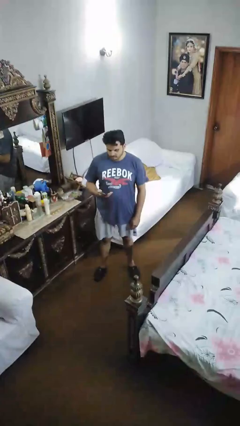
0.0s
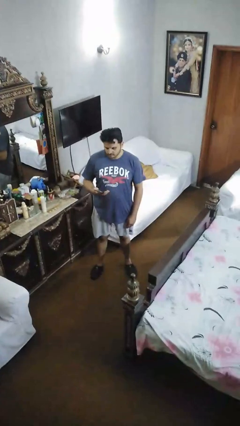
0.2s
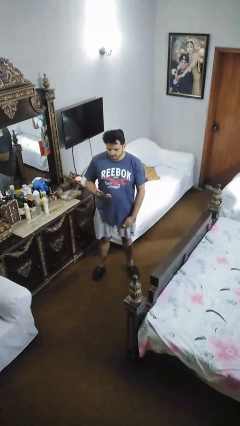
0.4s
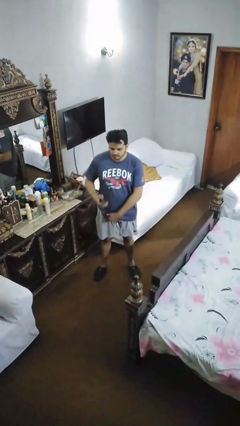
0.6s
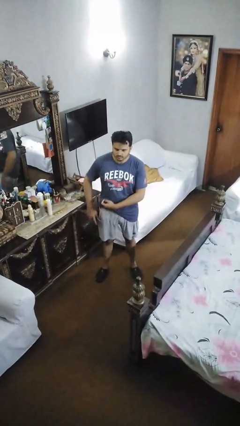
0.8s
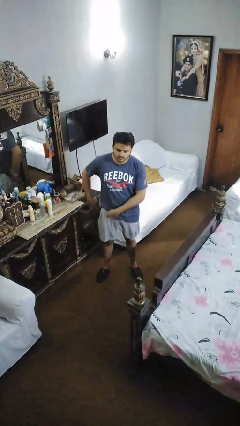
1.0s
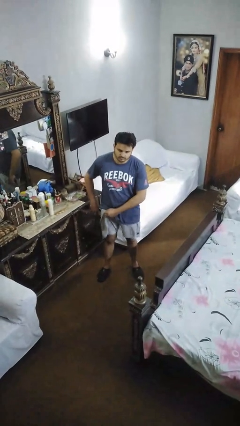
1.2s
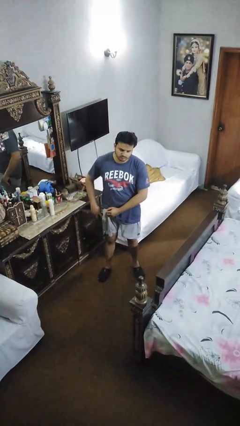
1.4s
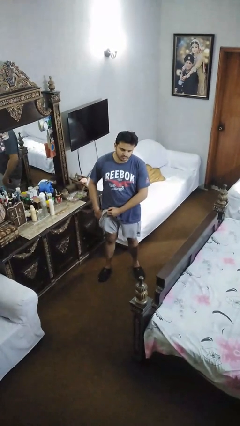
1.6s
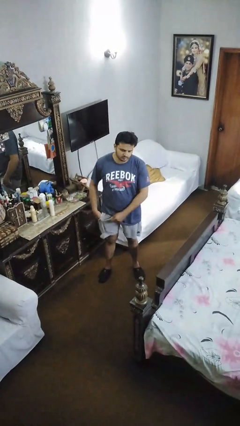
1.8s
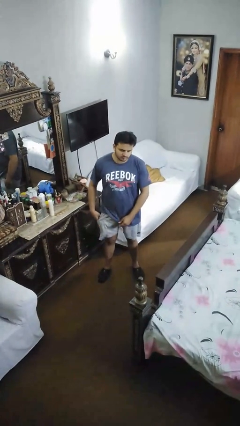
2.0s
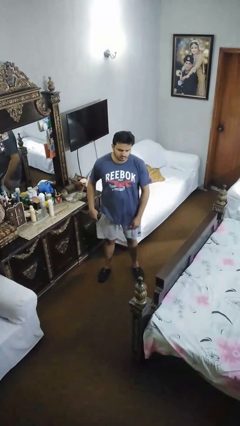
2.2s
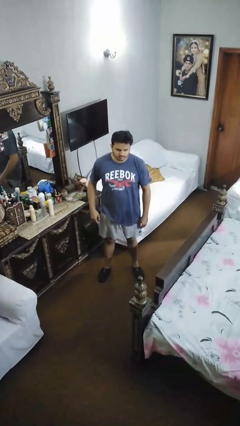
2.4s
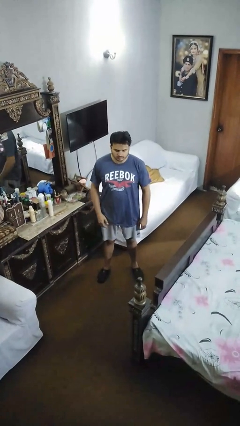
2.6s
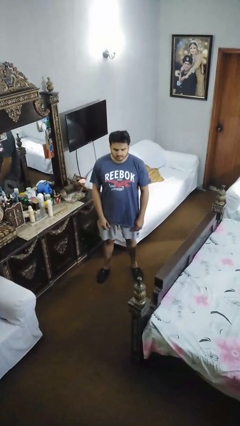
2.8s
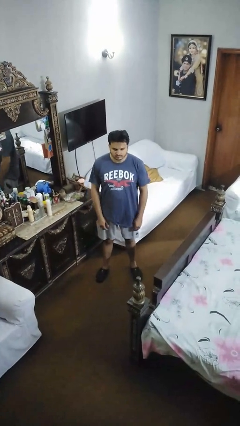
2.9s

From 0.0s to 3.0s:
person puts phone into pocket

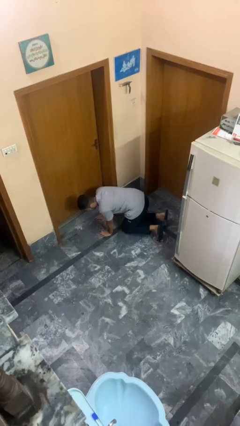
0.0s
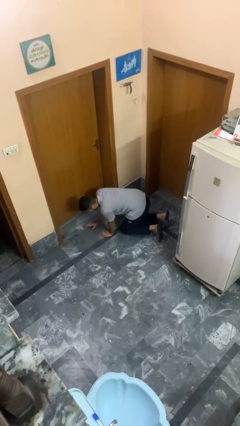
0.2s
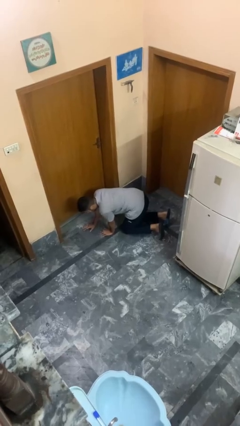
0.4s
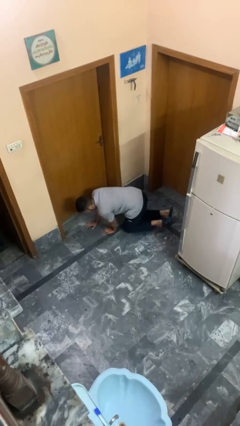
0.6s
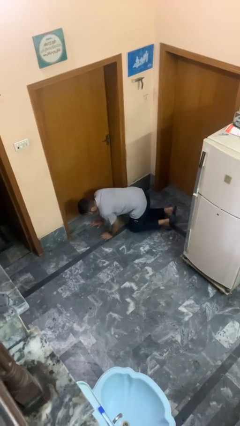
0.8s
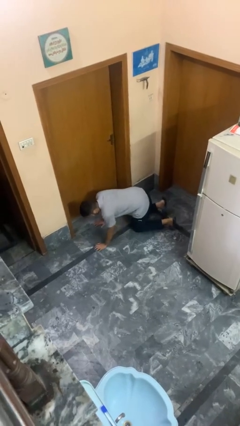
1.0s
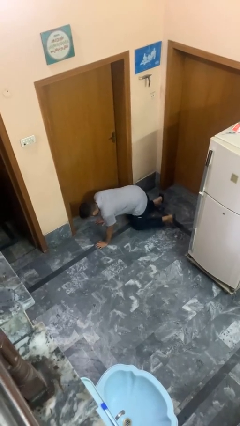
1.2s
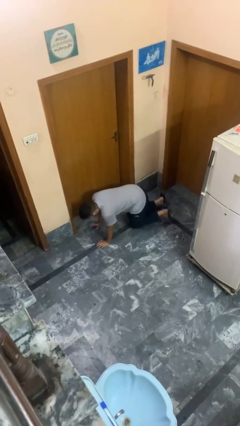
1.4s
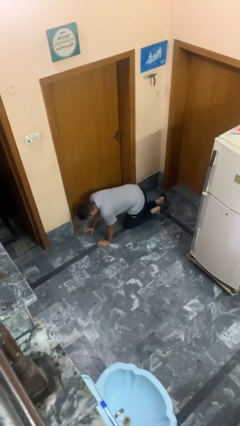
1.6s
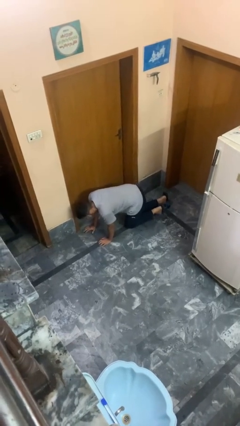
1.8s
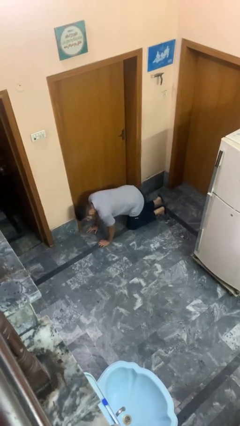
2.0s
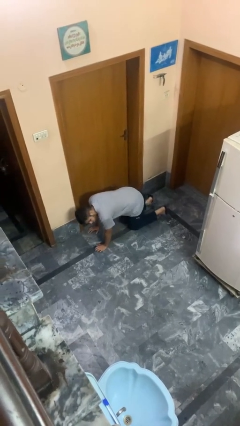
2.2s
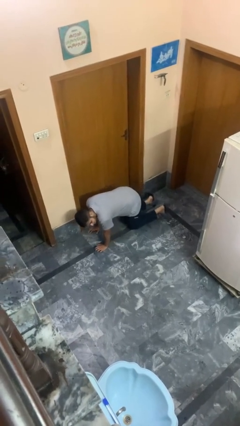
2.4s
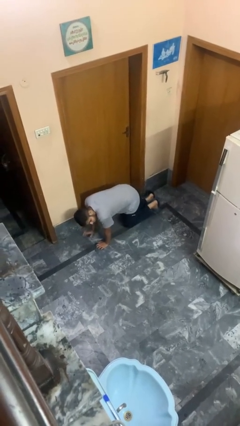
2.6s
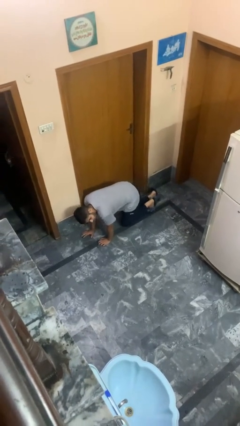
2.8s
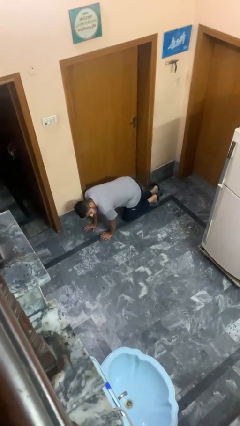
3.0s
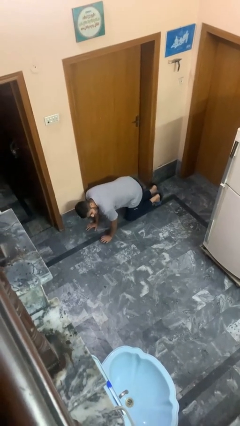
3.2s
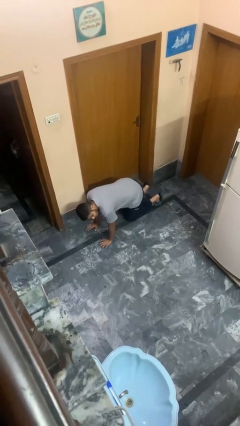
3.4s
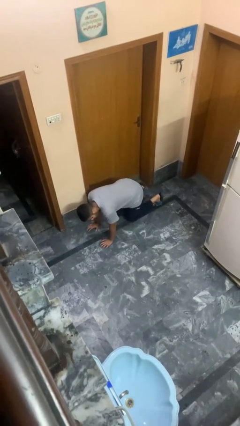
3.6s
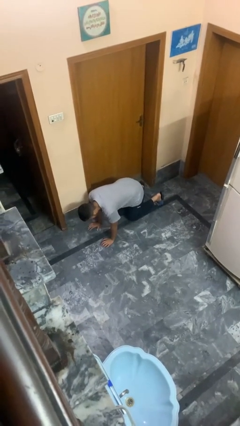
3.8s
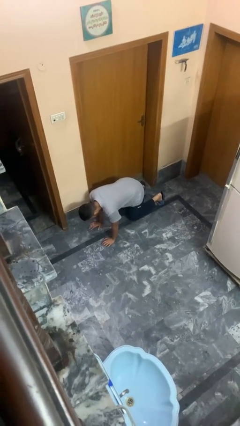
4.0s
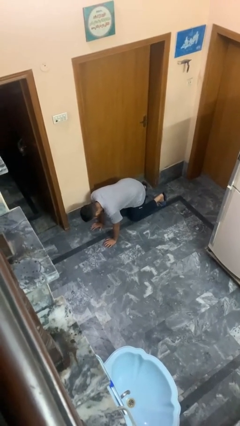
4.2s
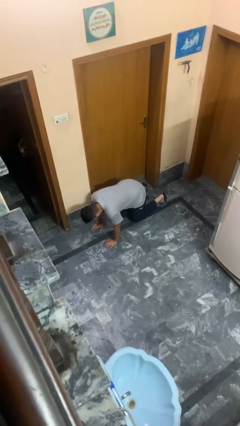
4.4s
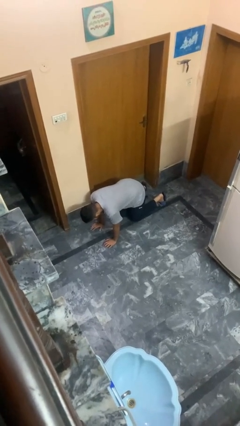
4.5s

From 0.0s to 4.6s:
person crawls

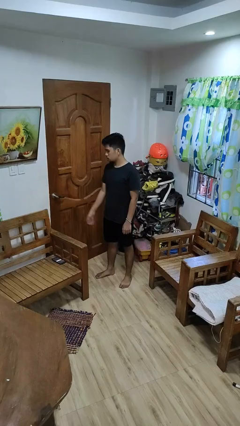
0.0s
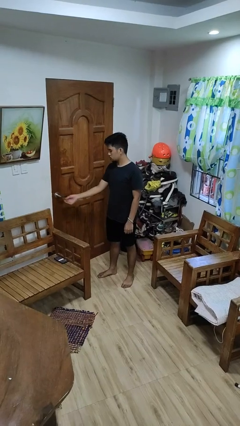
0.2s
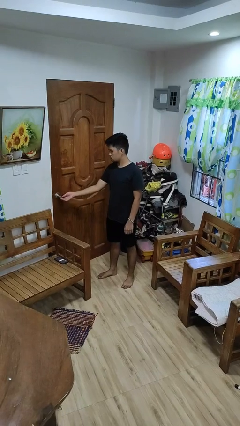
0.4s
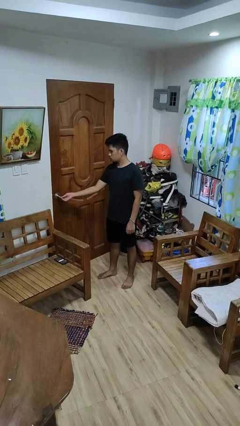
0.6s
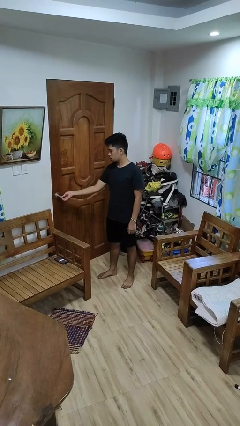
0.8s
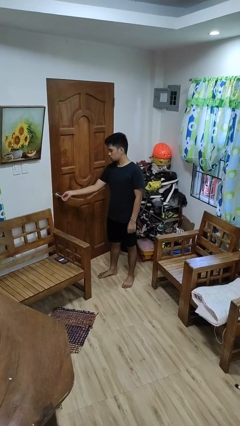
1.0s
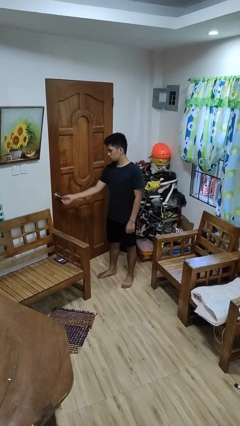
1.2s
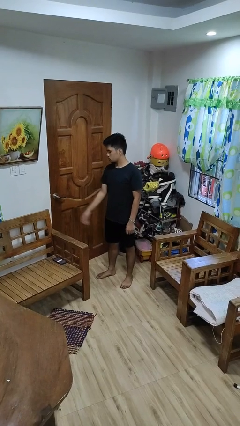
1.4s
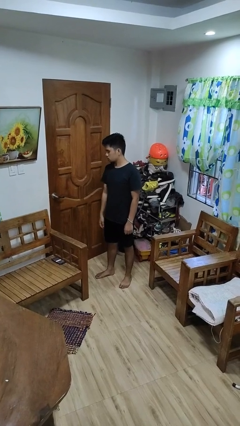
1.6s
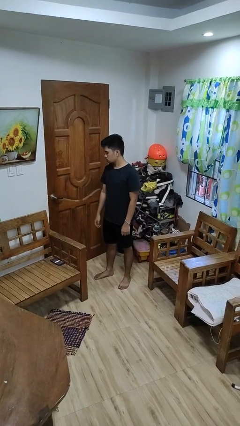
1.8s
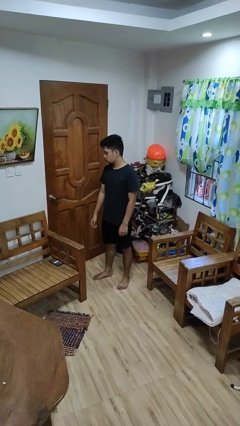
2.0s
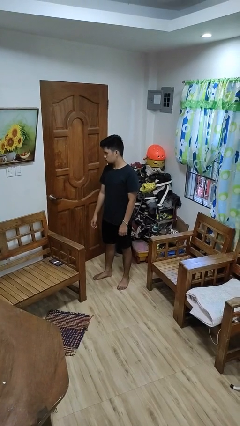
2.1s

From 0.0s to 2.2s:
person locks door with keys

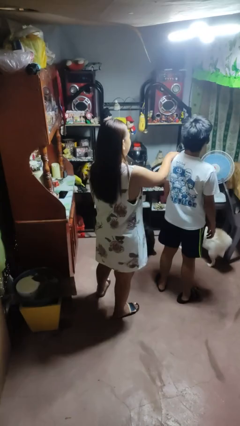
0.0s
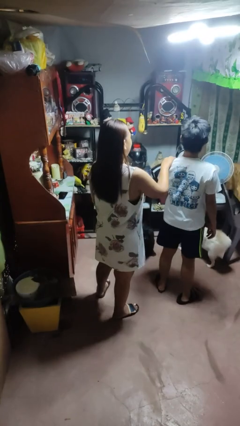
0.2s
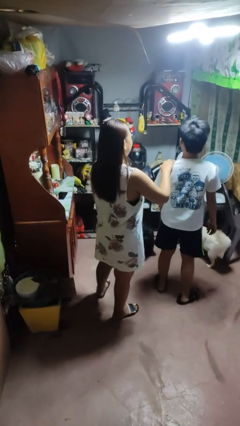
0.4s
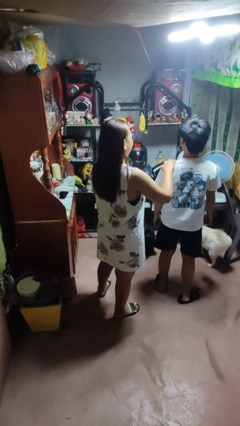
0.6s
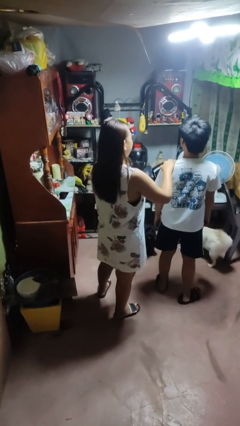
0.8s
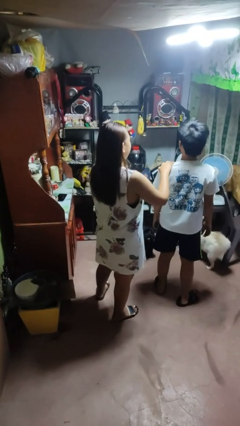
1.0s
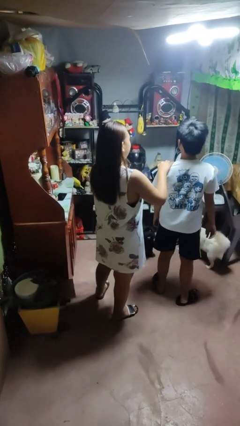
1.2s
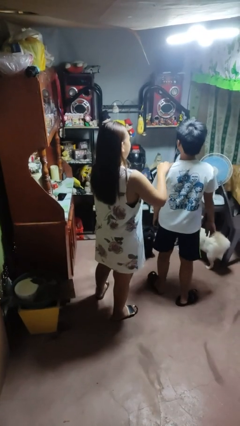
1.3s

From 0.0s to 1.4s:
person grabs person by shoulder

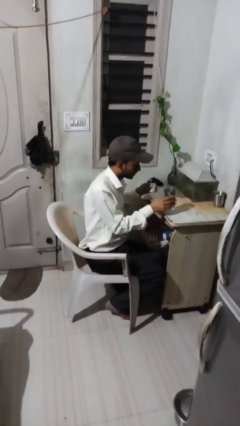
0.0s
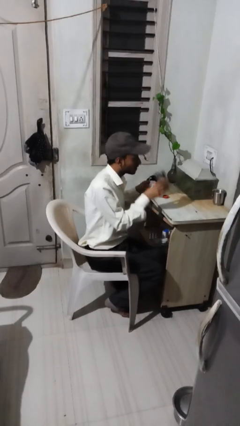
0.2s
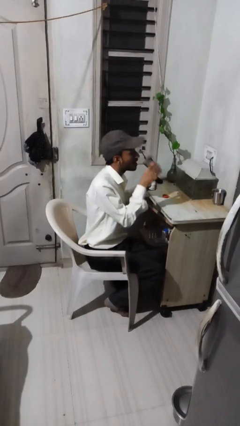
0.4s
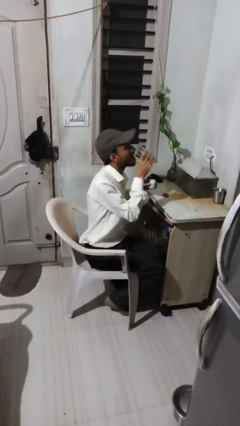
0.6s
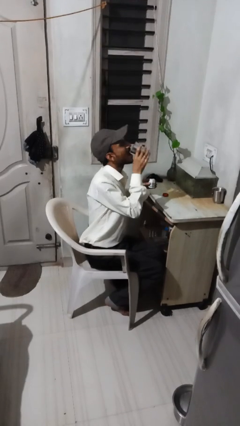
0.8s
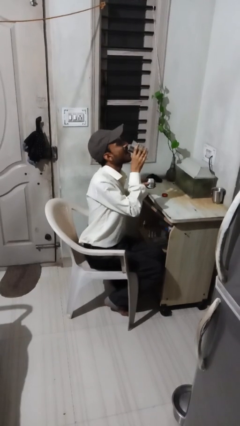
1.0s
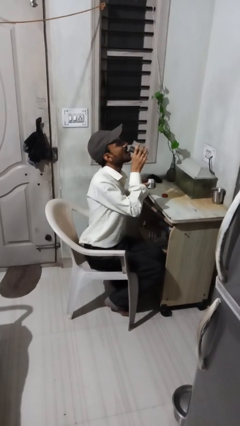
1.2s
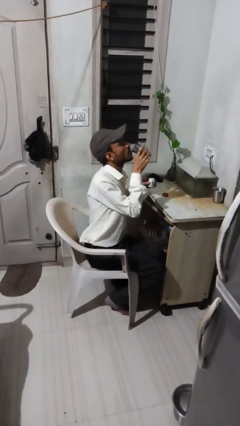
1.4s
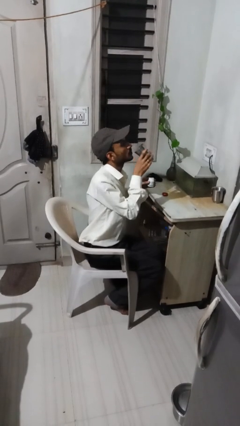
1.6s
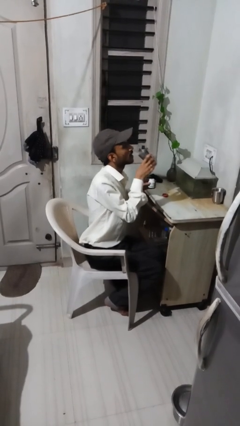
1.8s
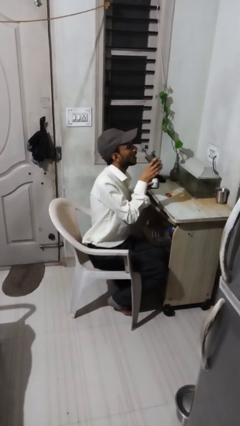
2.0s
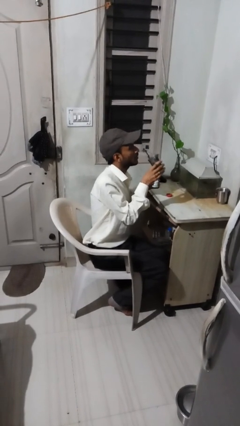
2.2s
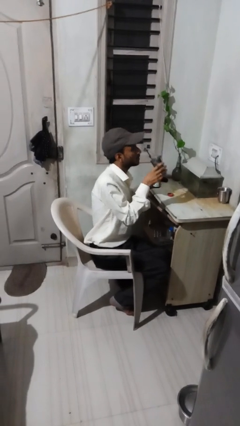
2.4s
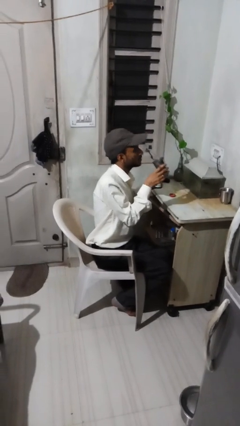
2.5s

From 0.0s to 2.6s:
person drinks from cup

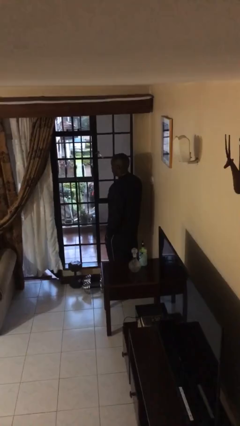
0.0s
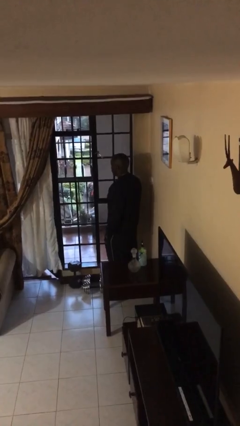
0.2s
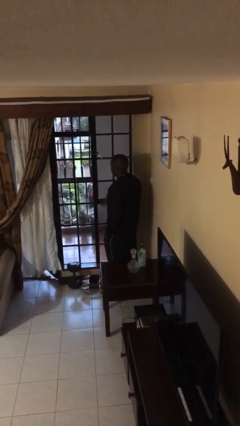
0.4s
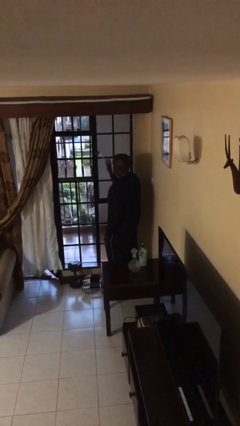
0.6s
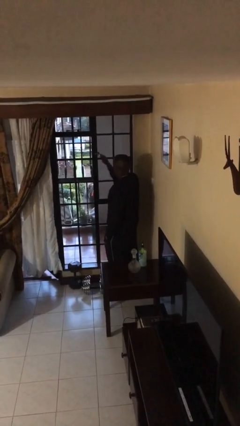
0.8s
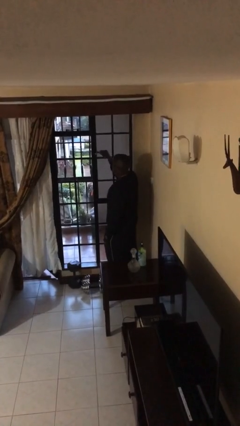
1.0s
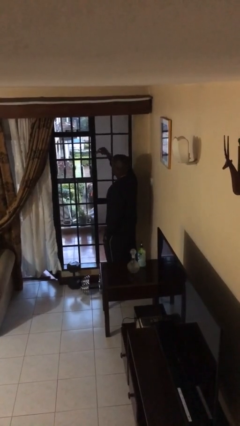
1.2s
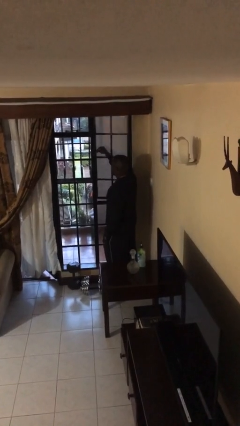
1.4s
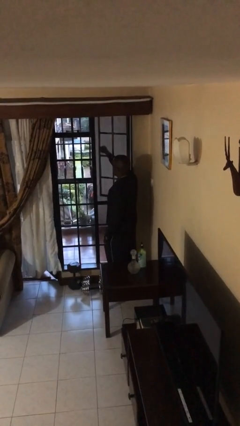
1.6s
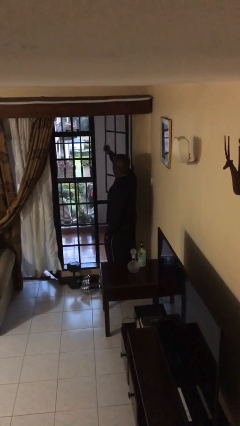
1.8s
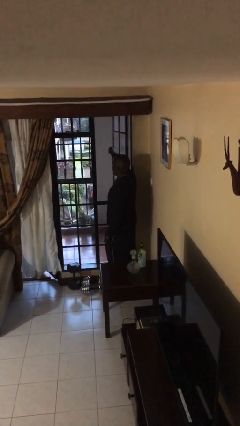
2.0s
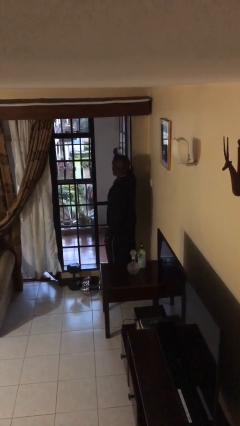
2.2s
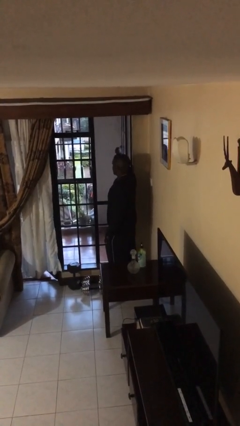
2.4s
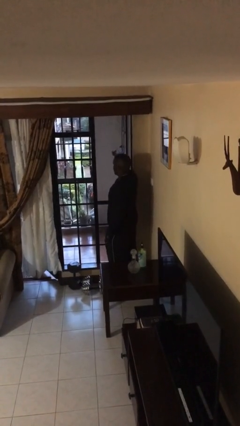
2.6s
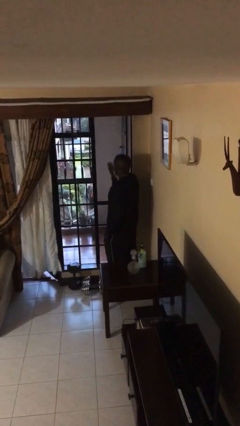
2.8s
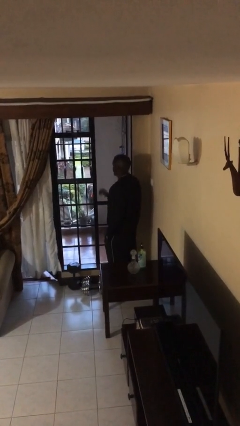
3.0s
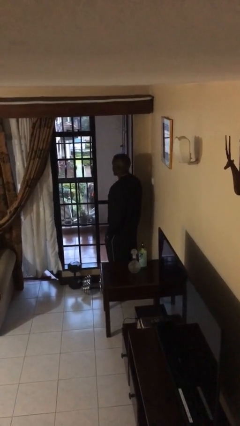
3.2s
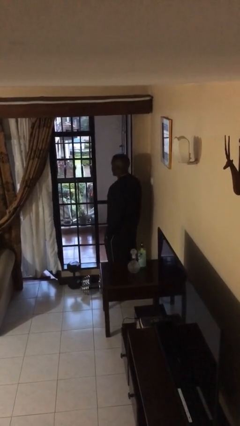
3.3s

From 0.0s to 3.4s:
person opens home window
